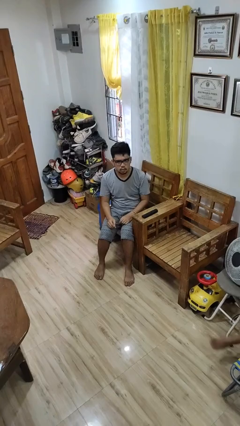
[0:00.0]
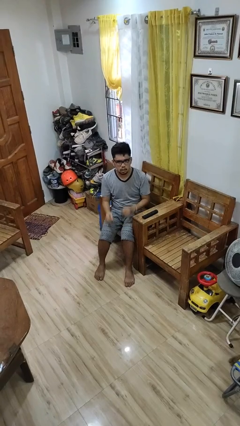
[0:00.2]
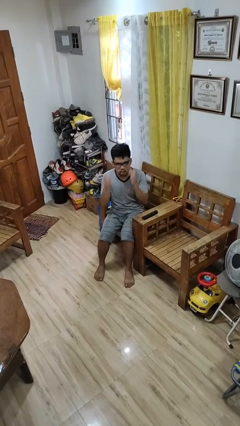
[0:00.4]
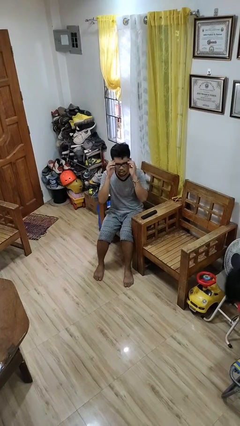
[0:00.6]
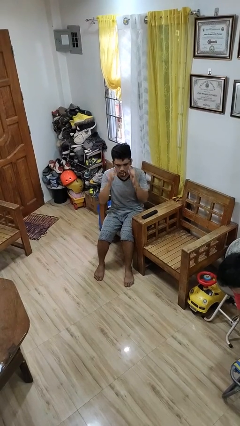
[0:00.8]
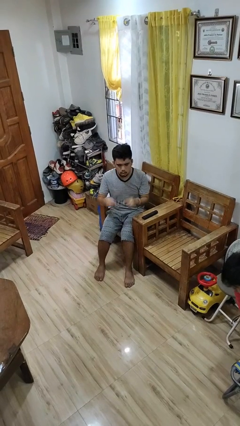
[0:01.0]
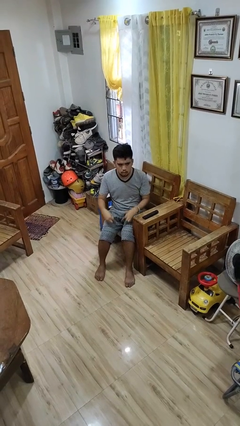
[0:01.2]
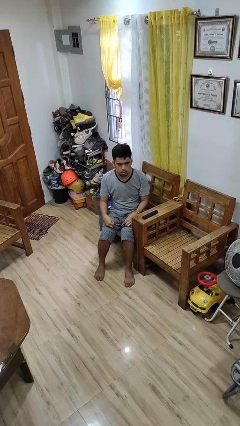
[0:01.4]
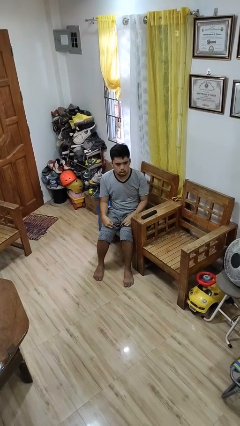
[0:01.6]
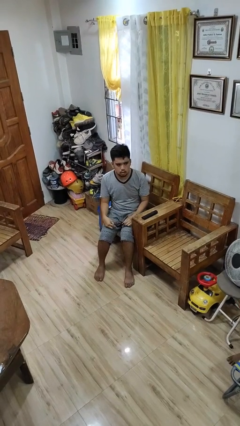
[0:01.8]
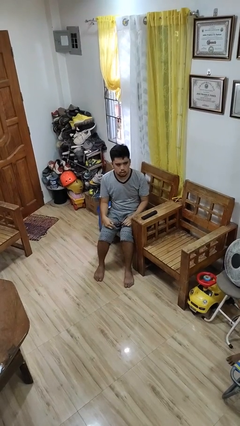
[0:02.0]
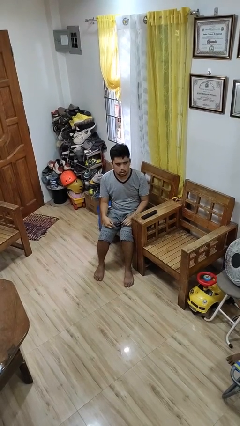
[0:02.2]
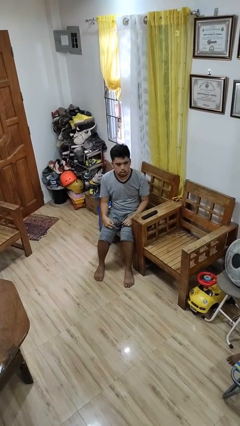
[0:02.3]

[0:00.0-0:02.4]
person takes off glasses

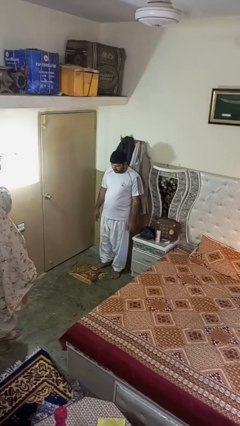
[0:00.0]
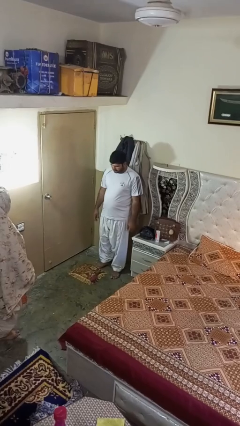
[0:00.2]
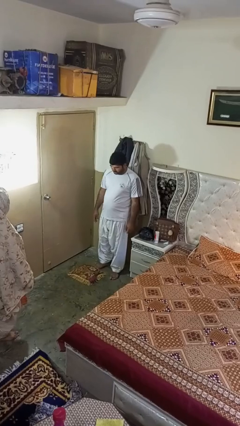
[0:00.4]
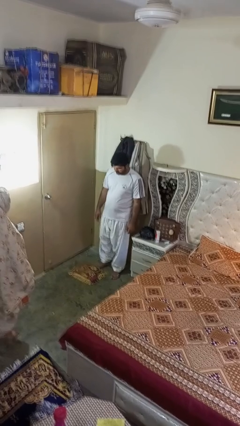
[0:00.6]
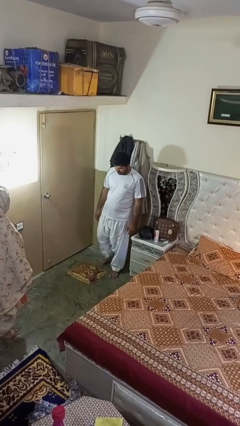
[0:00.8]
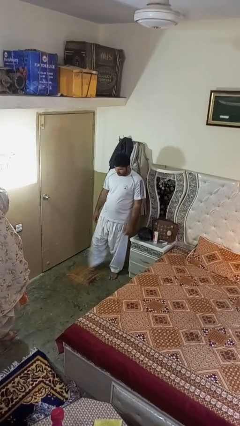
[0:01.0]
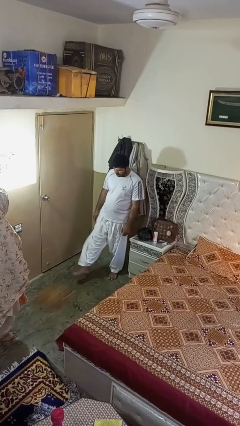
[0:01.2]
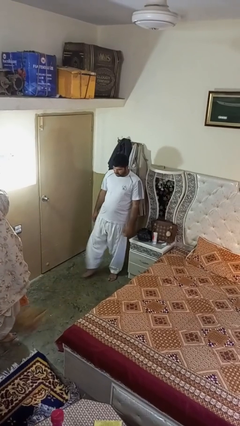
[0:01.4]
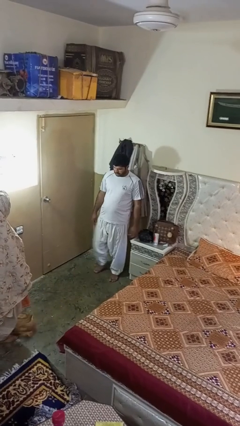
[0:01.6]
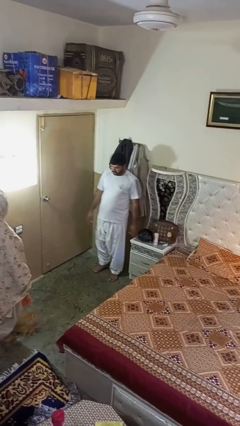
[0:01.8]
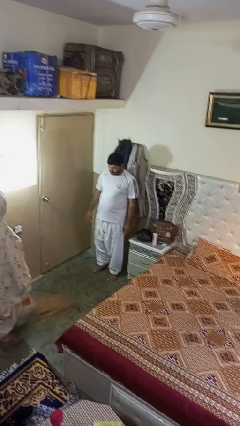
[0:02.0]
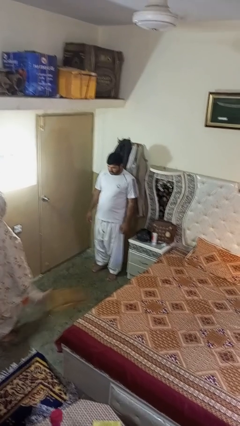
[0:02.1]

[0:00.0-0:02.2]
person kicks object to person

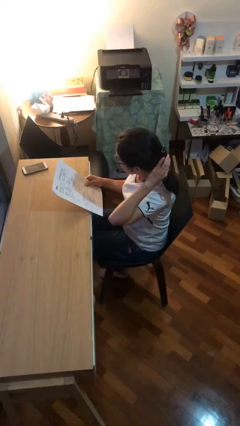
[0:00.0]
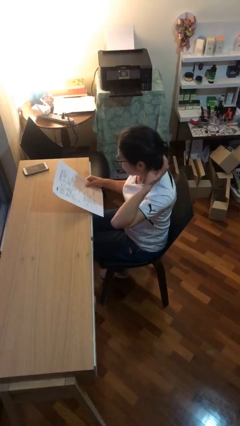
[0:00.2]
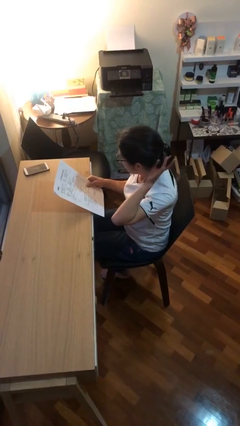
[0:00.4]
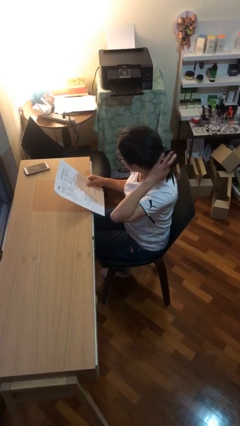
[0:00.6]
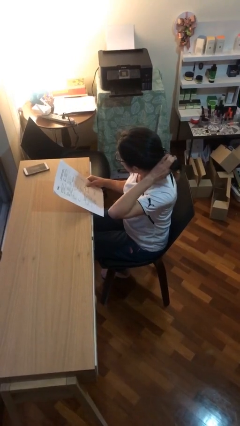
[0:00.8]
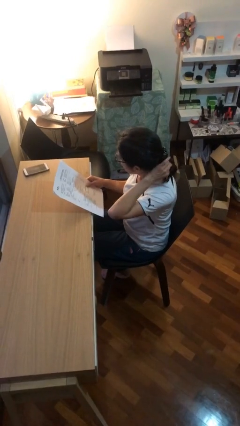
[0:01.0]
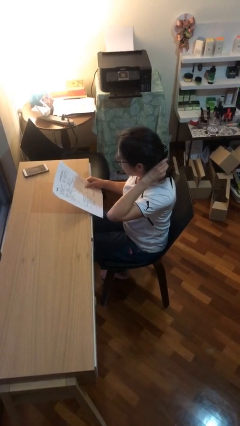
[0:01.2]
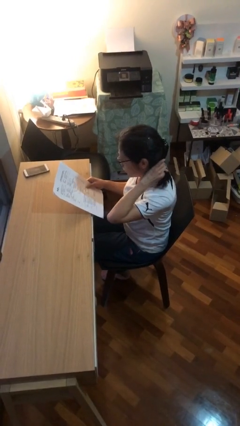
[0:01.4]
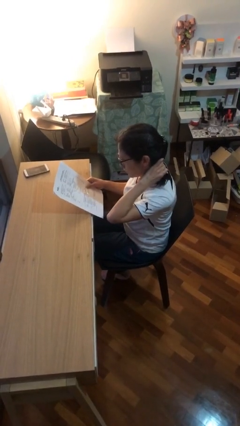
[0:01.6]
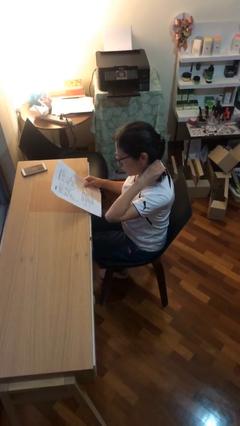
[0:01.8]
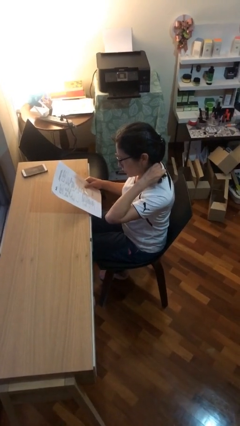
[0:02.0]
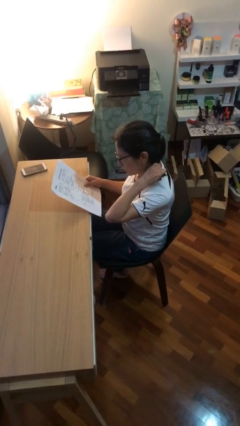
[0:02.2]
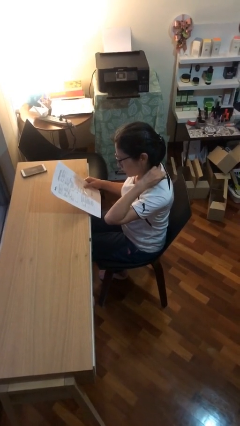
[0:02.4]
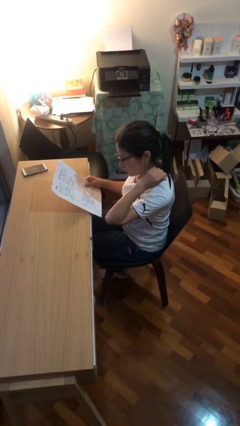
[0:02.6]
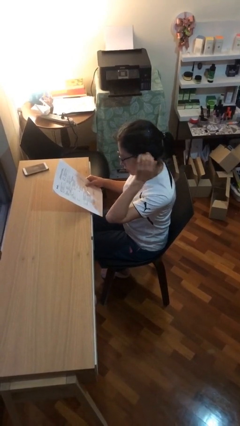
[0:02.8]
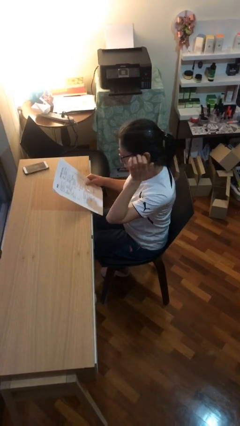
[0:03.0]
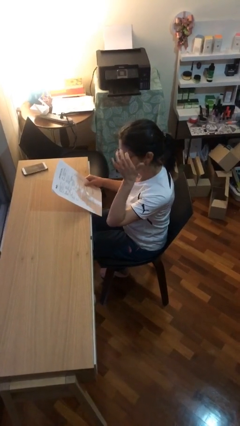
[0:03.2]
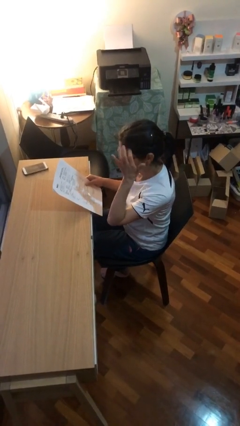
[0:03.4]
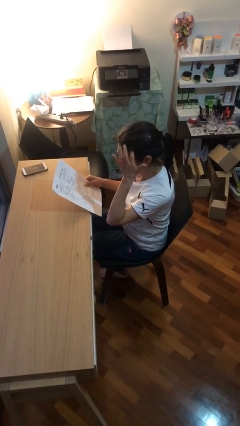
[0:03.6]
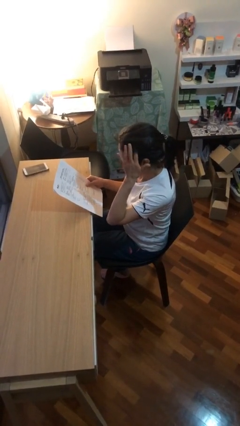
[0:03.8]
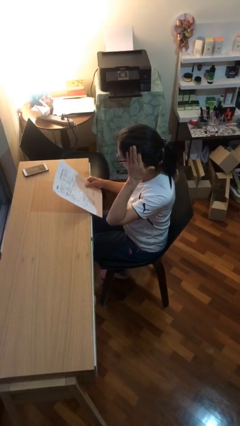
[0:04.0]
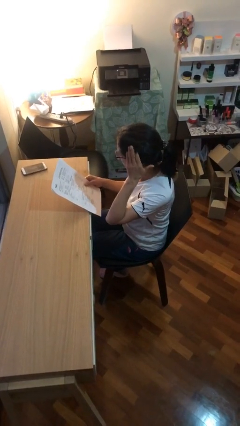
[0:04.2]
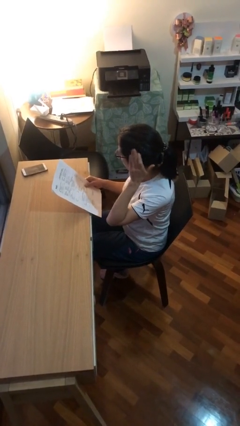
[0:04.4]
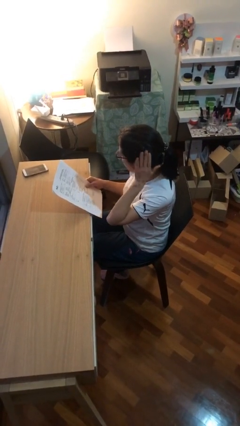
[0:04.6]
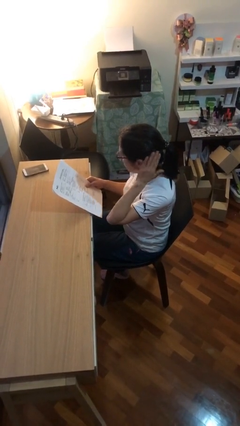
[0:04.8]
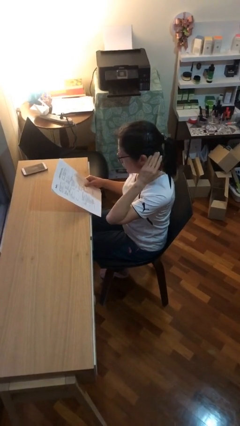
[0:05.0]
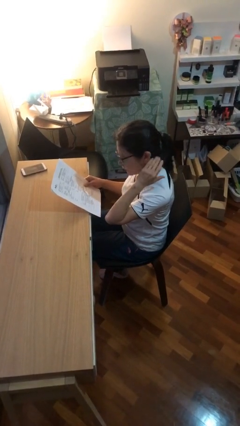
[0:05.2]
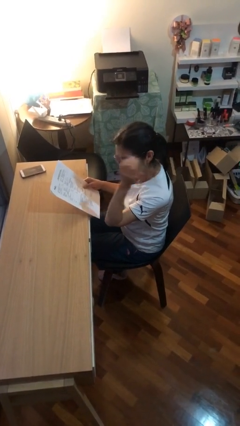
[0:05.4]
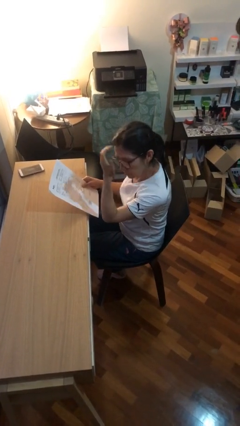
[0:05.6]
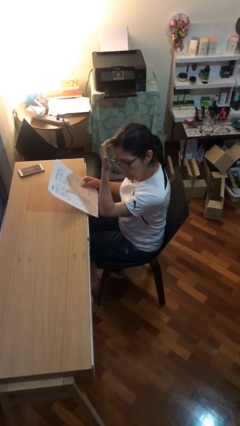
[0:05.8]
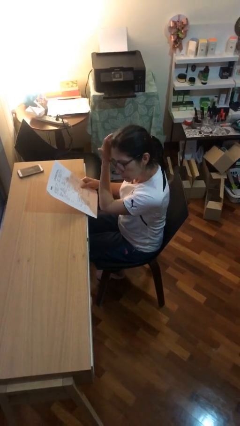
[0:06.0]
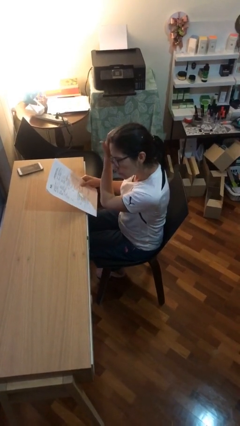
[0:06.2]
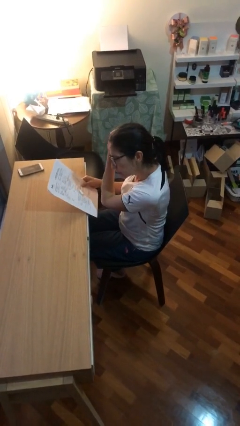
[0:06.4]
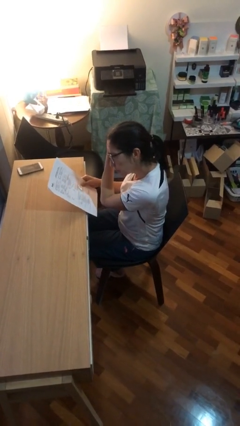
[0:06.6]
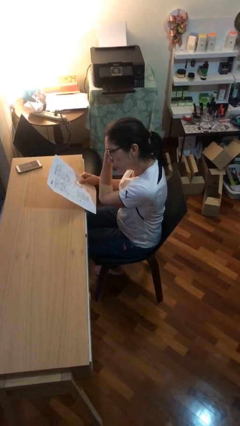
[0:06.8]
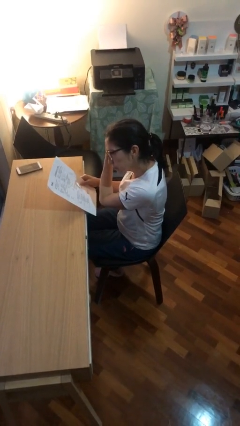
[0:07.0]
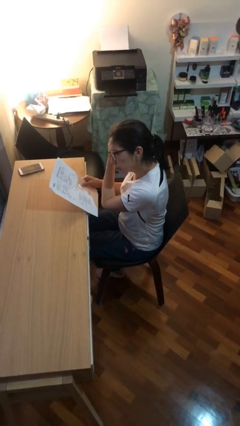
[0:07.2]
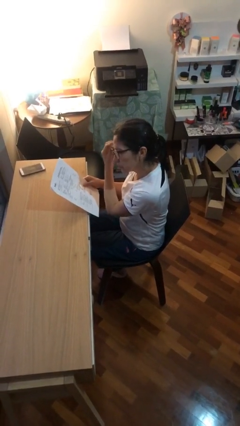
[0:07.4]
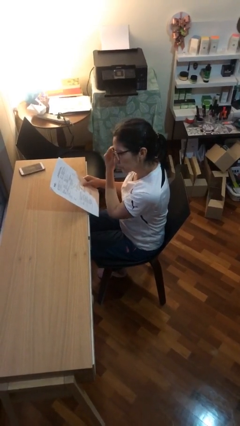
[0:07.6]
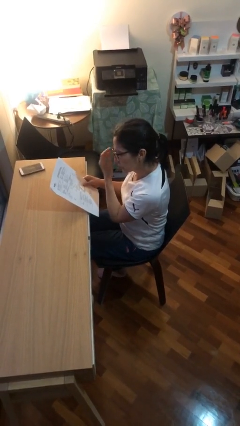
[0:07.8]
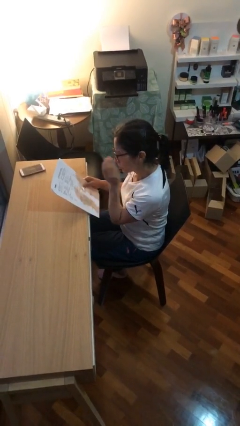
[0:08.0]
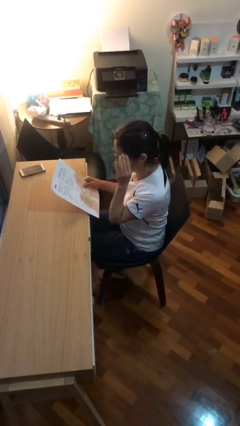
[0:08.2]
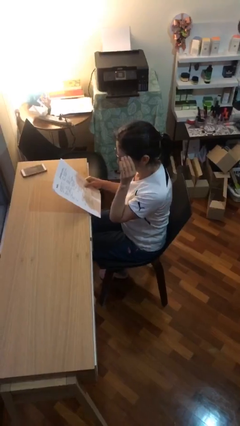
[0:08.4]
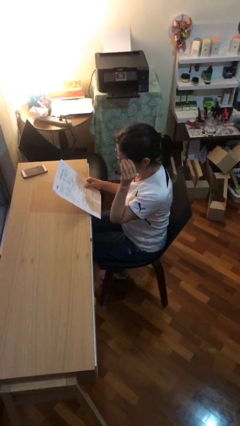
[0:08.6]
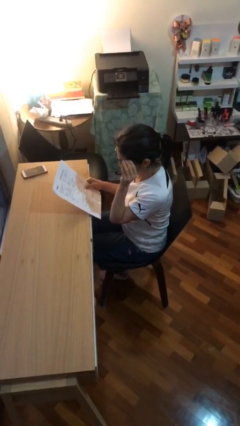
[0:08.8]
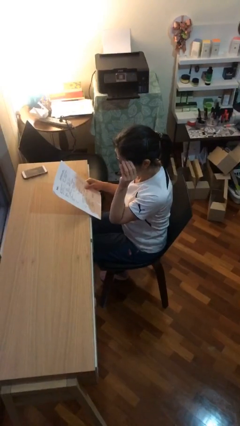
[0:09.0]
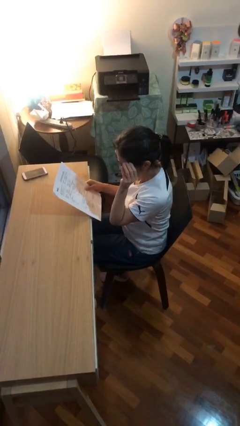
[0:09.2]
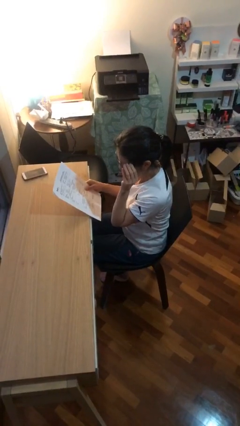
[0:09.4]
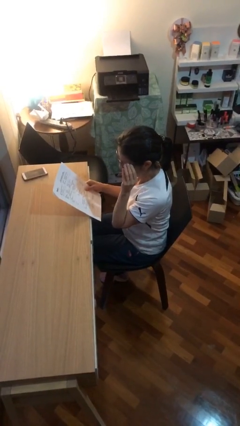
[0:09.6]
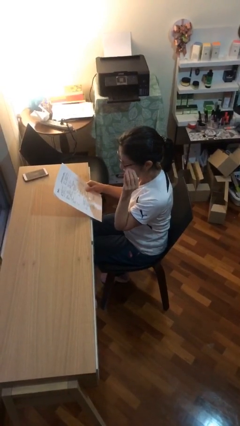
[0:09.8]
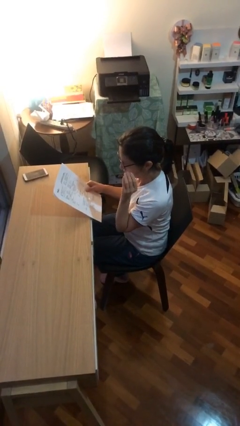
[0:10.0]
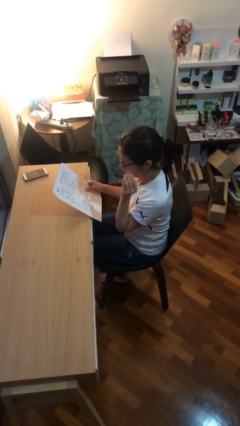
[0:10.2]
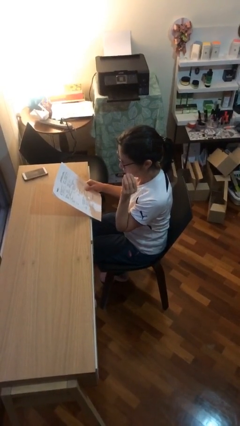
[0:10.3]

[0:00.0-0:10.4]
person reads document

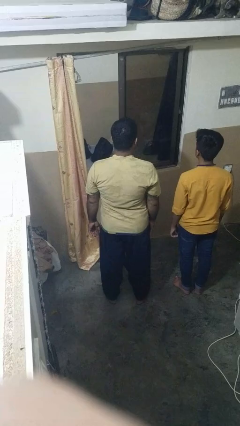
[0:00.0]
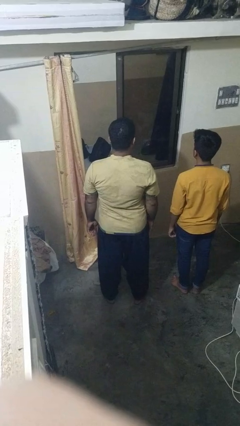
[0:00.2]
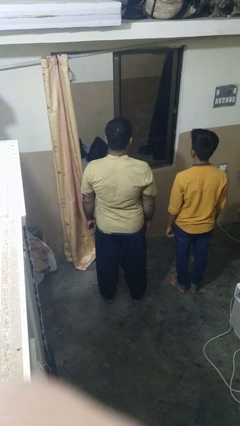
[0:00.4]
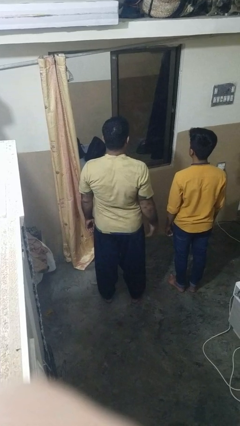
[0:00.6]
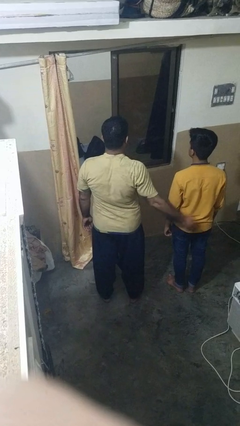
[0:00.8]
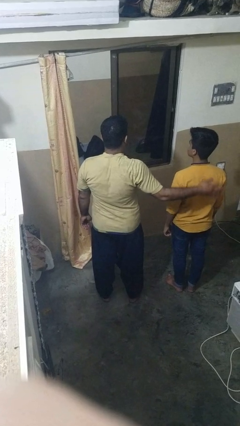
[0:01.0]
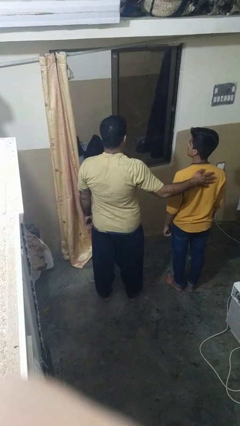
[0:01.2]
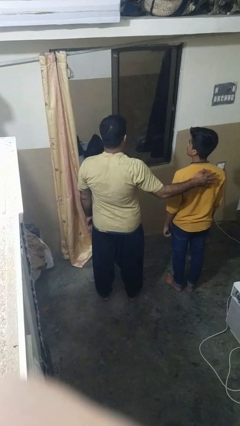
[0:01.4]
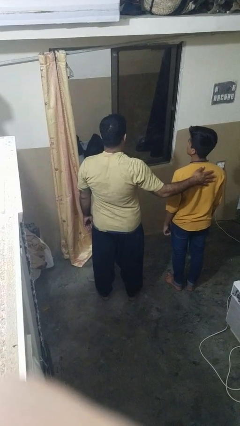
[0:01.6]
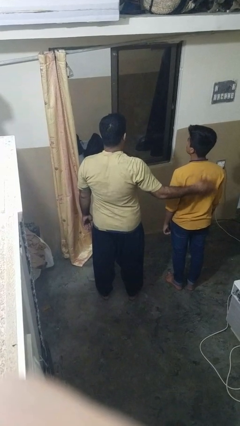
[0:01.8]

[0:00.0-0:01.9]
person touches back of person

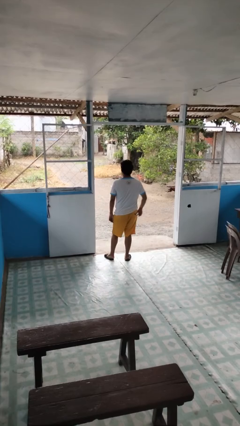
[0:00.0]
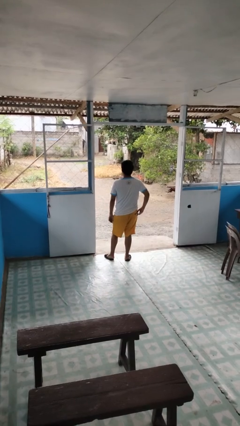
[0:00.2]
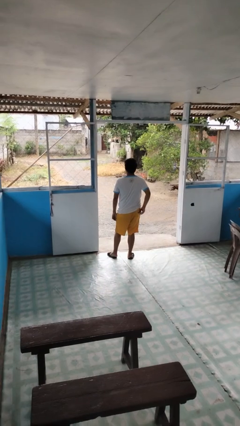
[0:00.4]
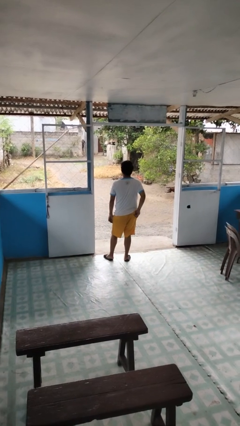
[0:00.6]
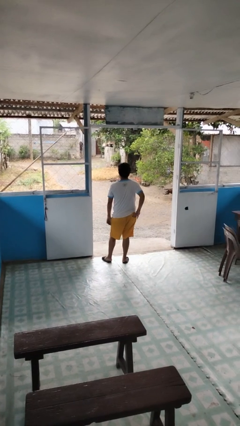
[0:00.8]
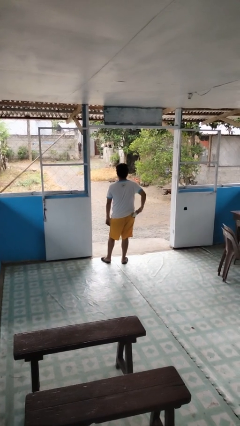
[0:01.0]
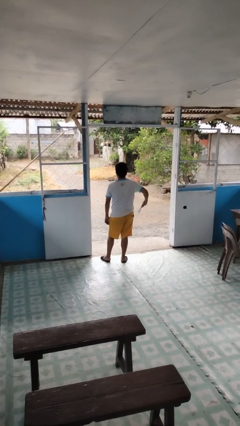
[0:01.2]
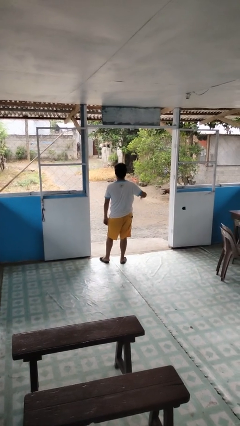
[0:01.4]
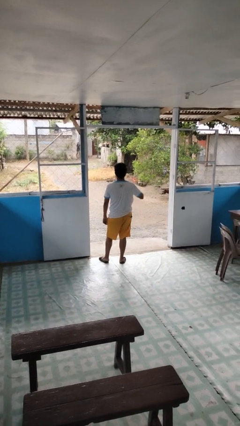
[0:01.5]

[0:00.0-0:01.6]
person takes phone from pocket
